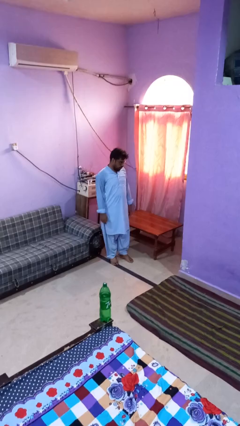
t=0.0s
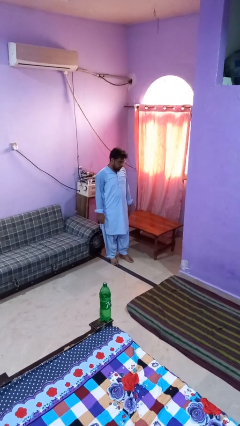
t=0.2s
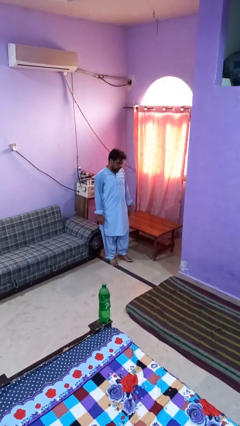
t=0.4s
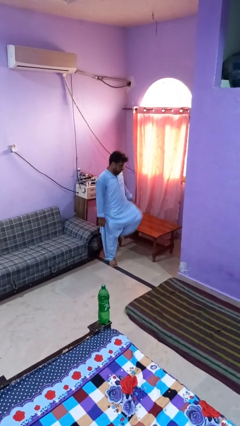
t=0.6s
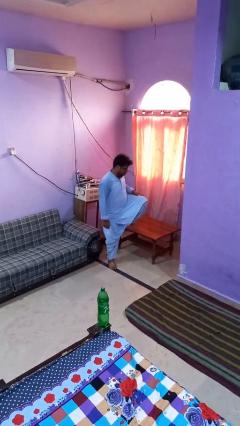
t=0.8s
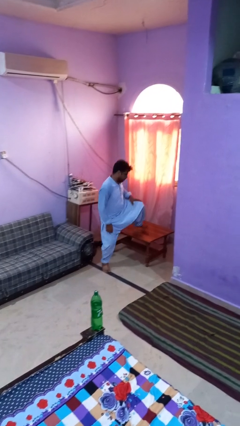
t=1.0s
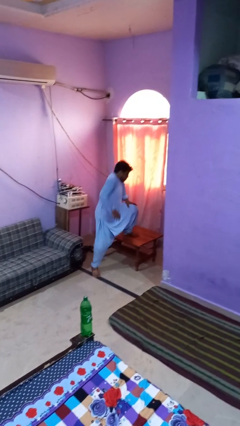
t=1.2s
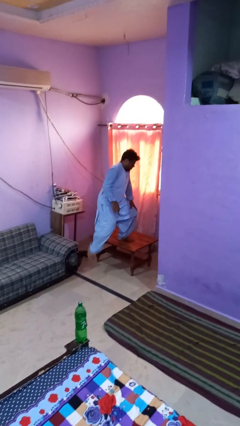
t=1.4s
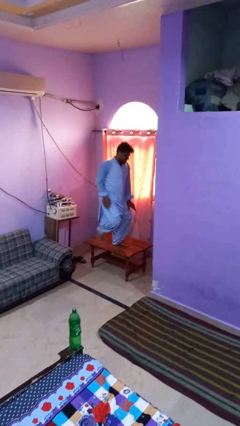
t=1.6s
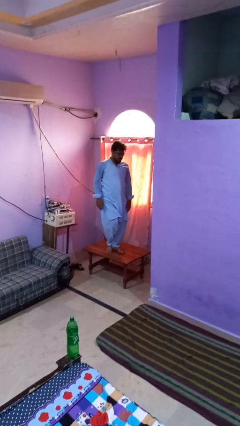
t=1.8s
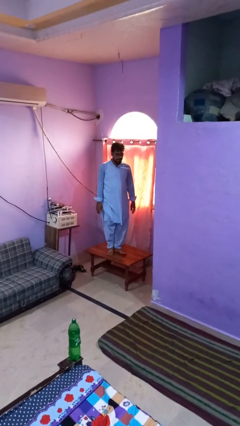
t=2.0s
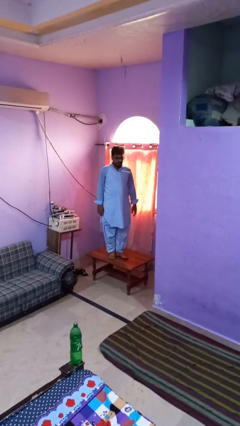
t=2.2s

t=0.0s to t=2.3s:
person climbs on table

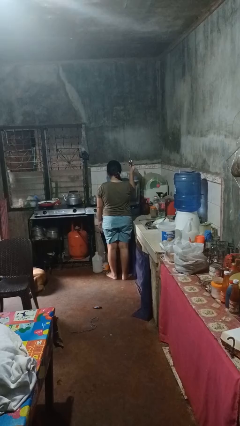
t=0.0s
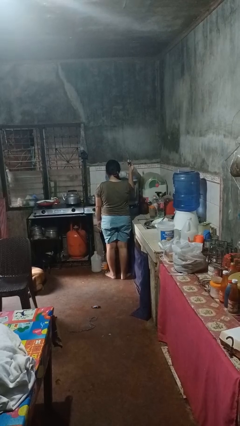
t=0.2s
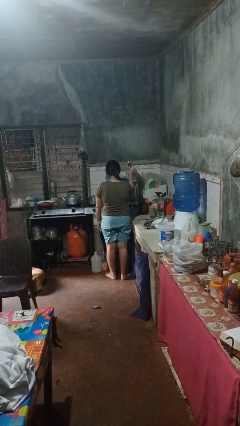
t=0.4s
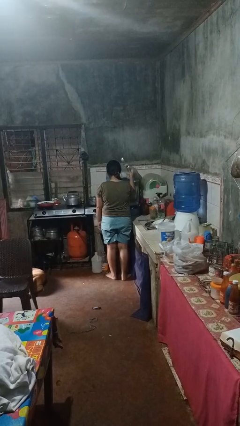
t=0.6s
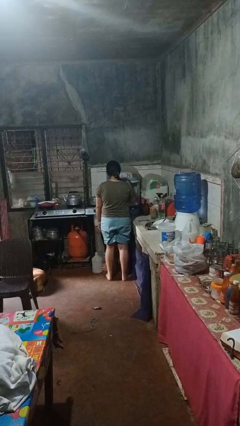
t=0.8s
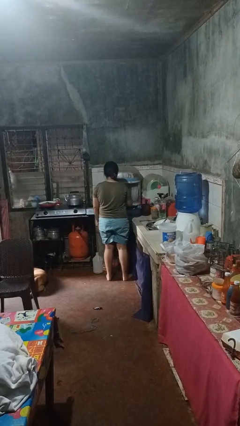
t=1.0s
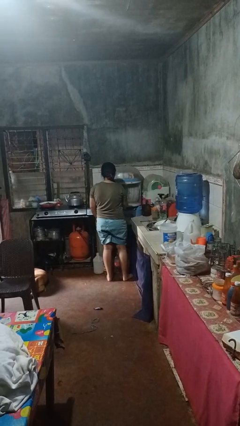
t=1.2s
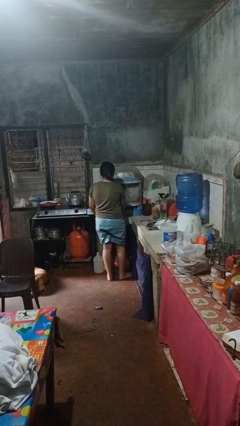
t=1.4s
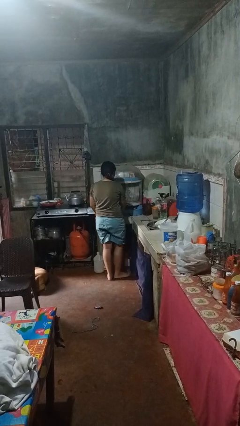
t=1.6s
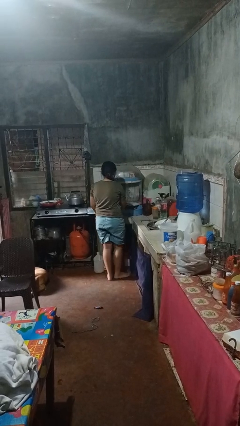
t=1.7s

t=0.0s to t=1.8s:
person puts object into kitchen drawer

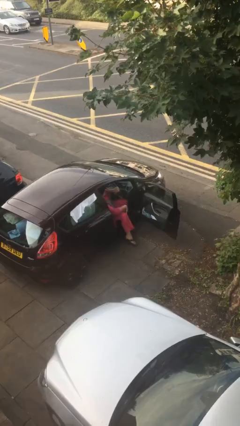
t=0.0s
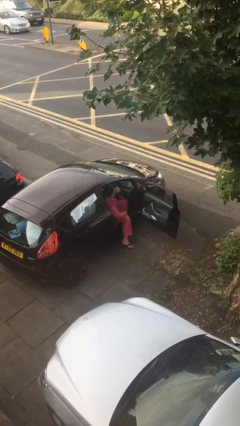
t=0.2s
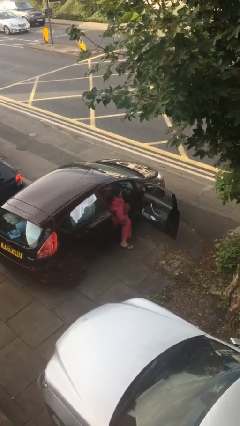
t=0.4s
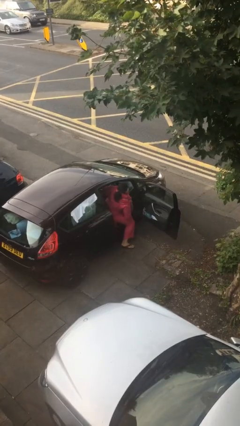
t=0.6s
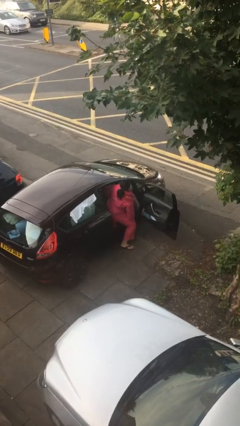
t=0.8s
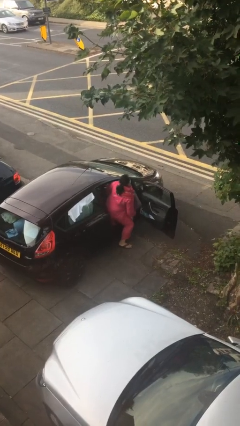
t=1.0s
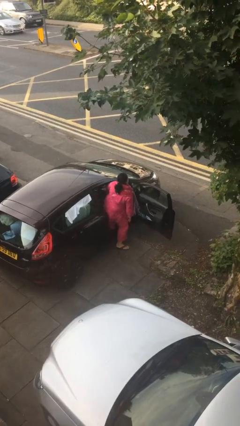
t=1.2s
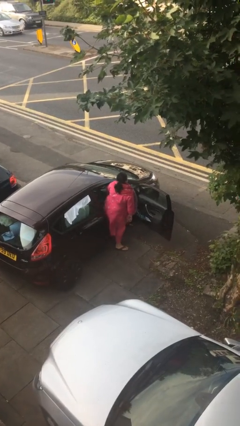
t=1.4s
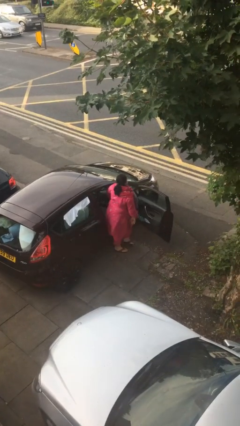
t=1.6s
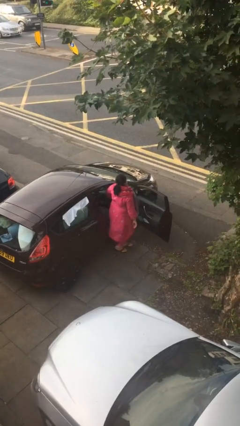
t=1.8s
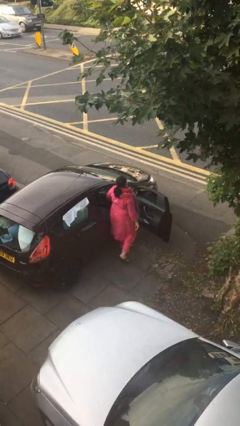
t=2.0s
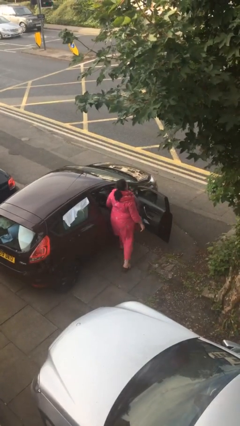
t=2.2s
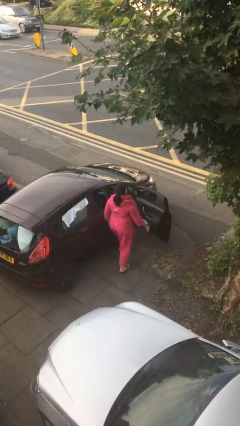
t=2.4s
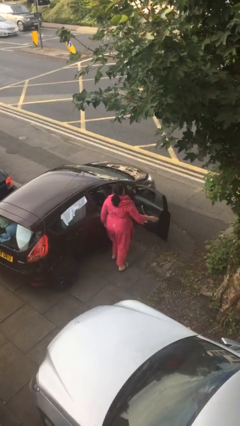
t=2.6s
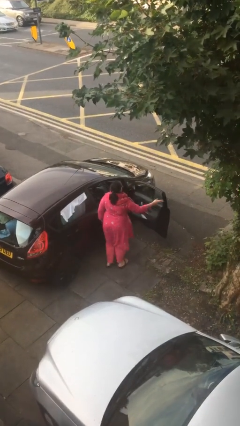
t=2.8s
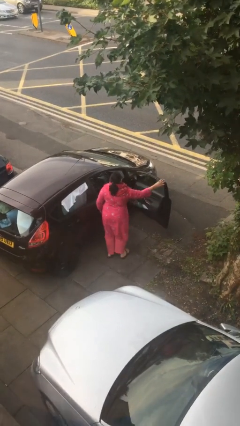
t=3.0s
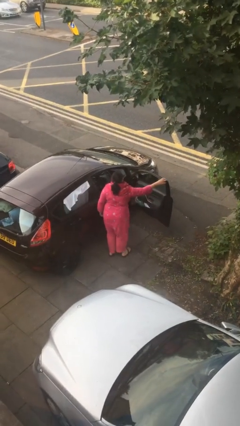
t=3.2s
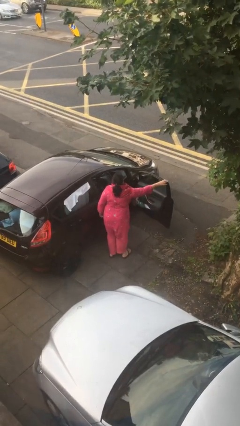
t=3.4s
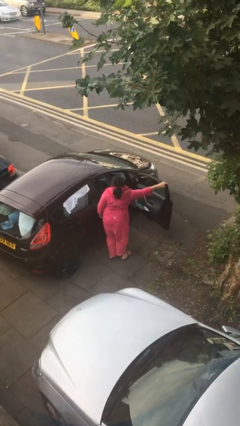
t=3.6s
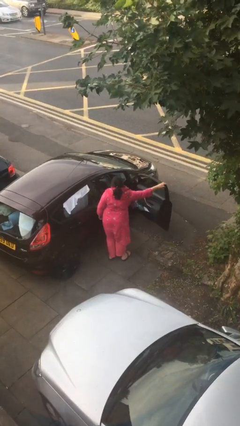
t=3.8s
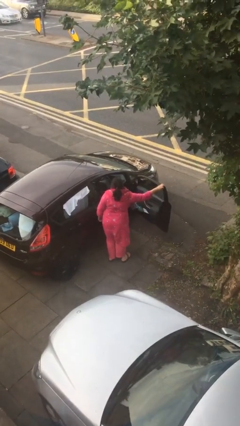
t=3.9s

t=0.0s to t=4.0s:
person exits car

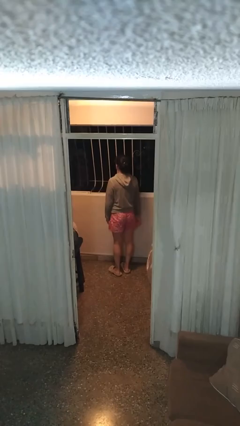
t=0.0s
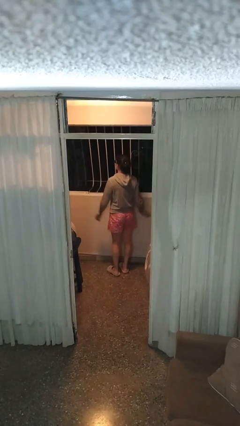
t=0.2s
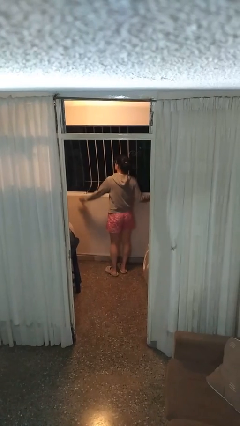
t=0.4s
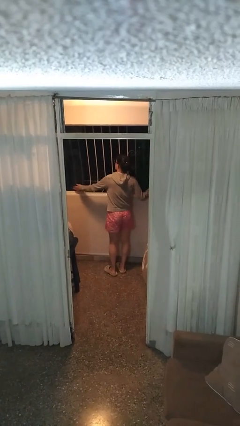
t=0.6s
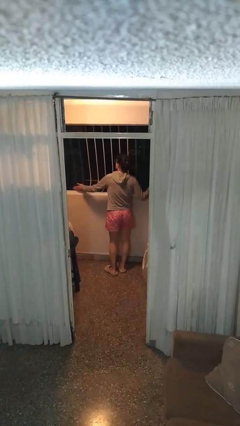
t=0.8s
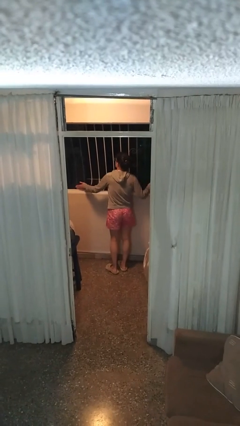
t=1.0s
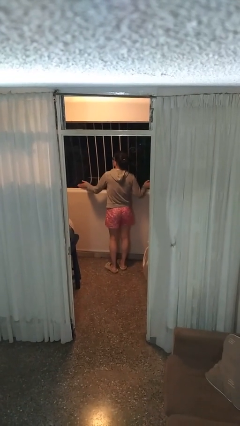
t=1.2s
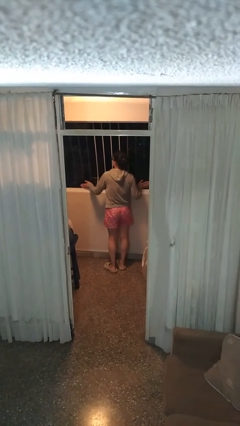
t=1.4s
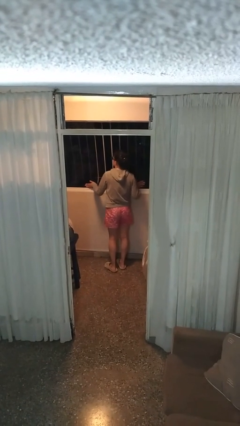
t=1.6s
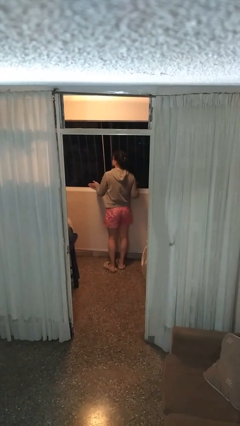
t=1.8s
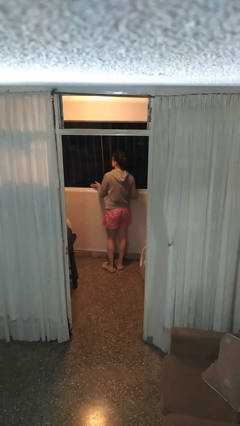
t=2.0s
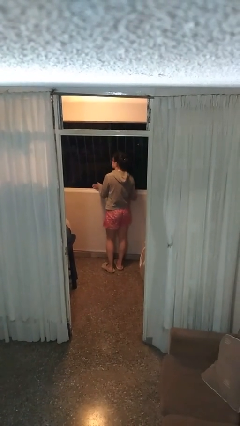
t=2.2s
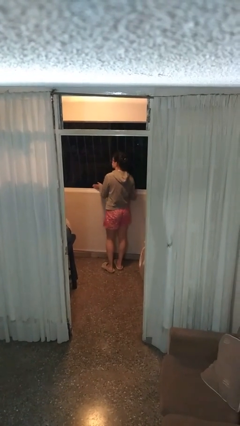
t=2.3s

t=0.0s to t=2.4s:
person closes home window

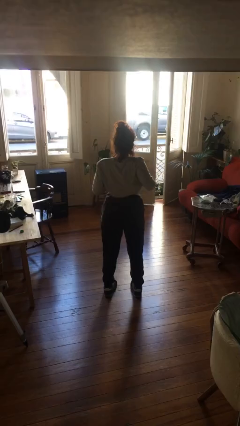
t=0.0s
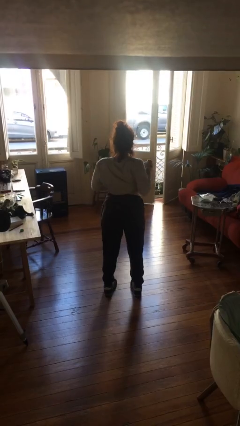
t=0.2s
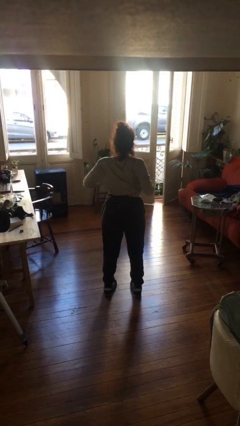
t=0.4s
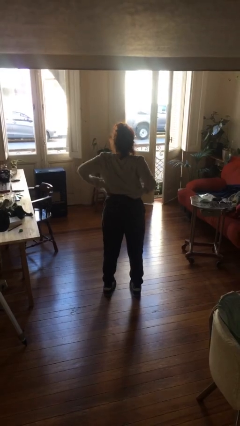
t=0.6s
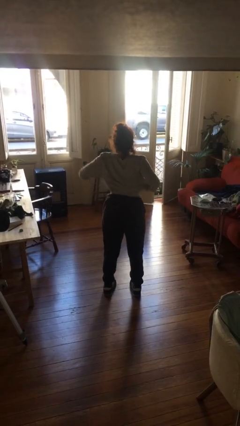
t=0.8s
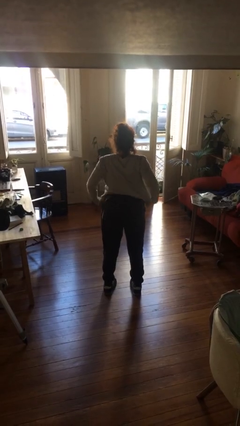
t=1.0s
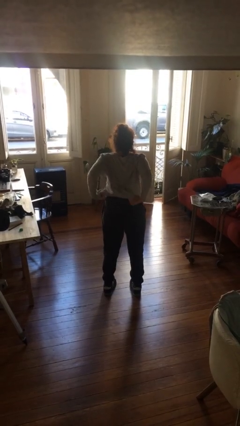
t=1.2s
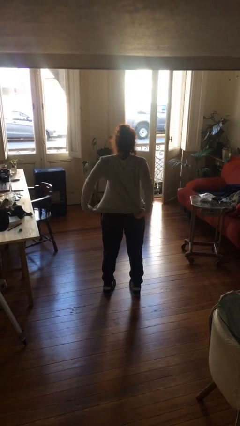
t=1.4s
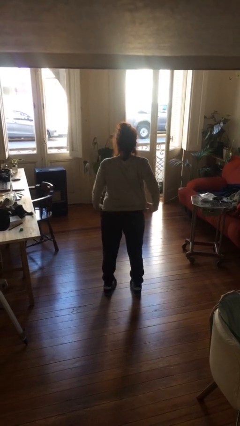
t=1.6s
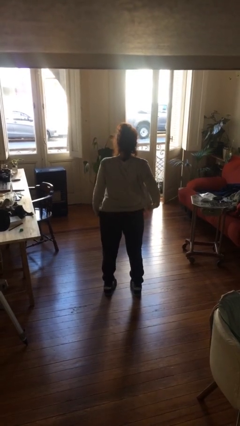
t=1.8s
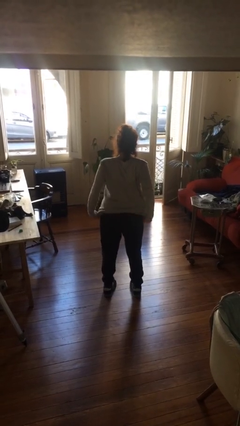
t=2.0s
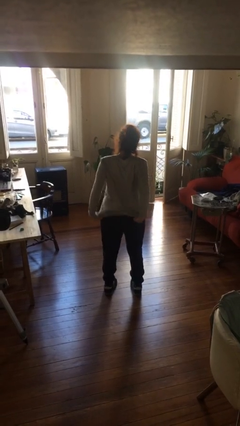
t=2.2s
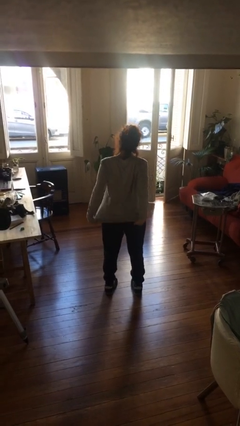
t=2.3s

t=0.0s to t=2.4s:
person untucks shirt

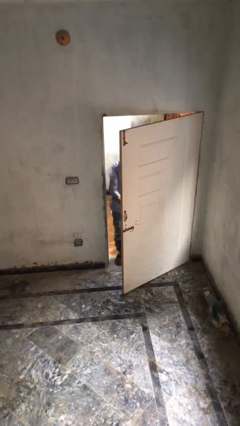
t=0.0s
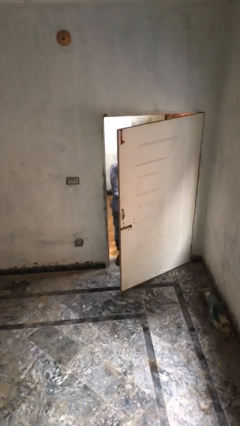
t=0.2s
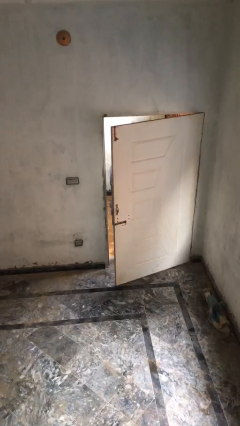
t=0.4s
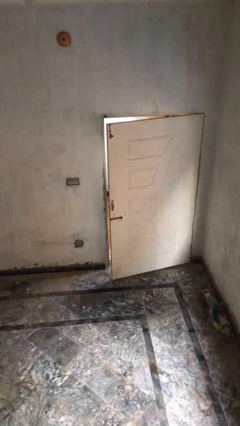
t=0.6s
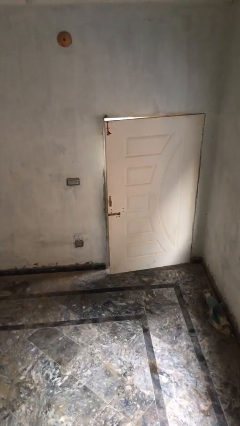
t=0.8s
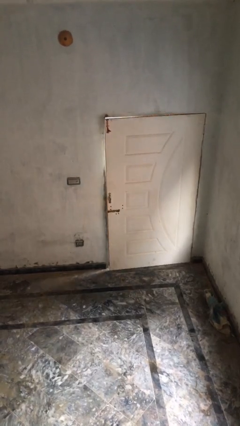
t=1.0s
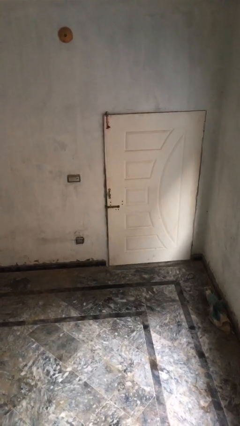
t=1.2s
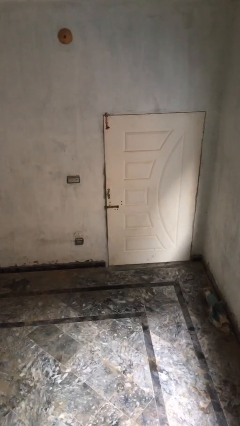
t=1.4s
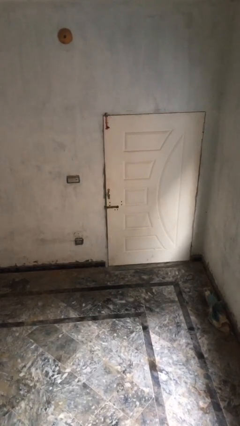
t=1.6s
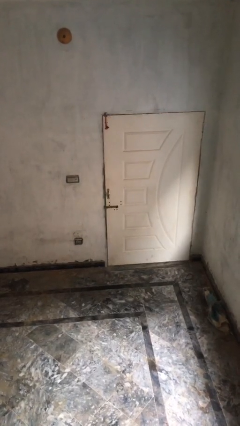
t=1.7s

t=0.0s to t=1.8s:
person closes facility door

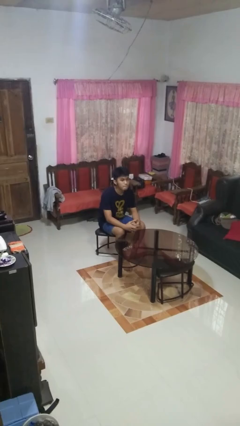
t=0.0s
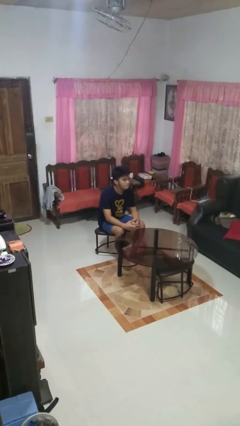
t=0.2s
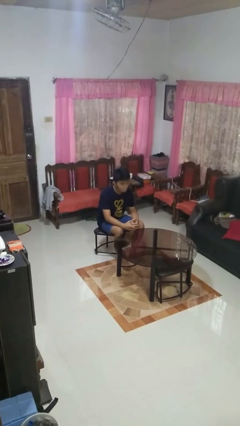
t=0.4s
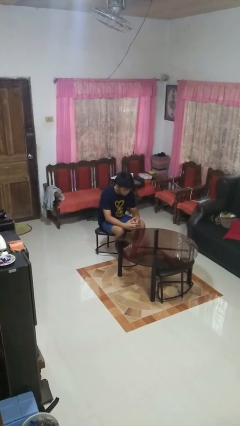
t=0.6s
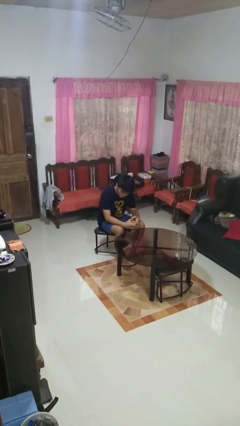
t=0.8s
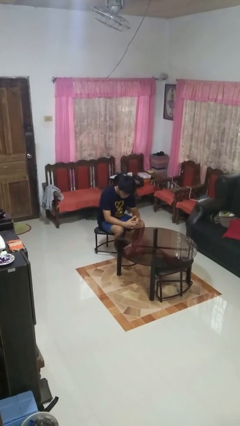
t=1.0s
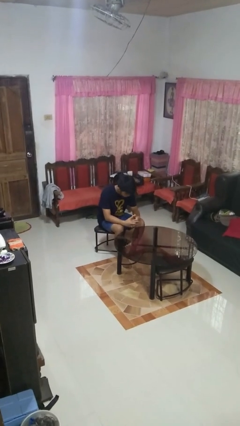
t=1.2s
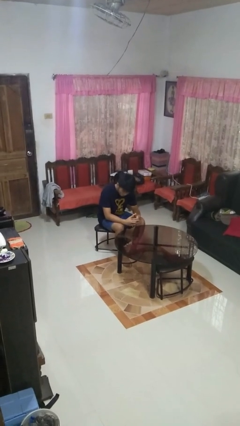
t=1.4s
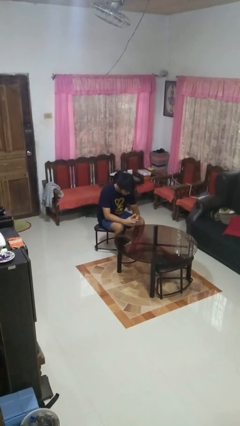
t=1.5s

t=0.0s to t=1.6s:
person shakes head

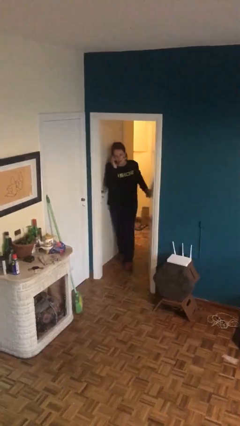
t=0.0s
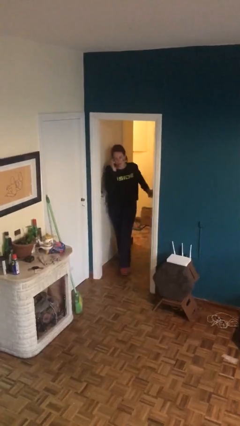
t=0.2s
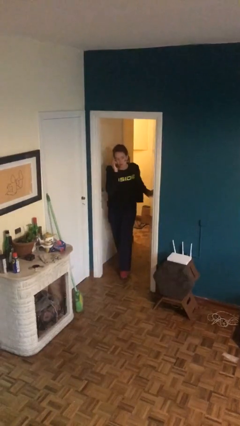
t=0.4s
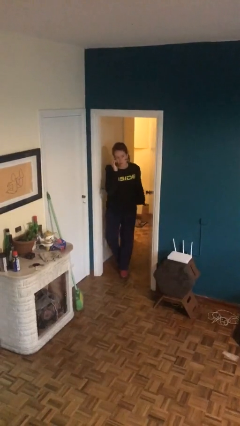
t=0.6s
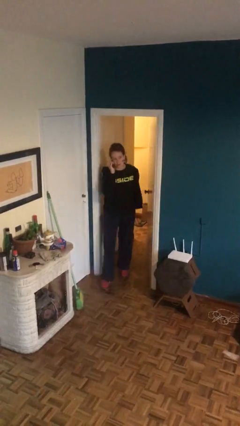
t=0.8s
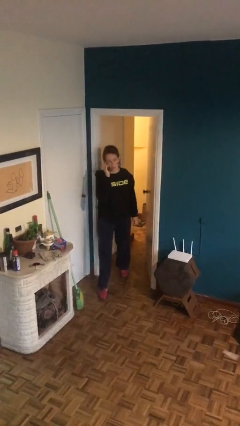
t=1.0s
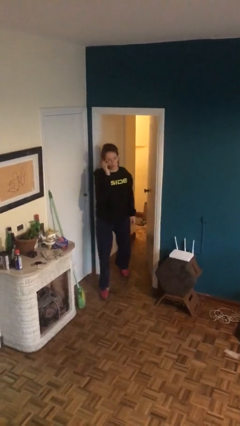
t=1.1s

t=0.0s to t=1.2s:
person enters scene through structure
